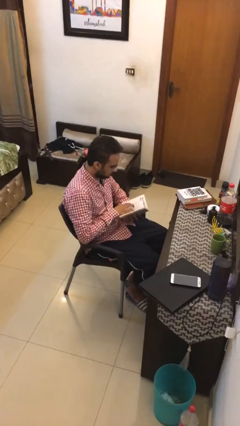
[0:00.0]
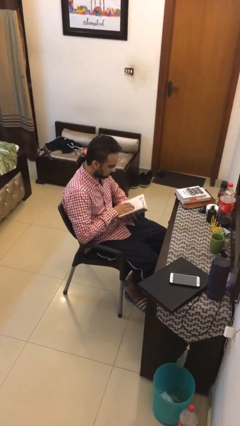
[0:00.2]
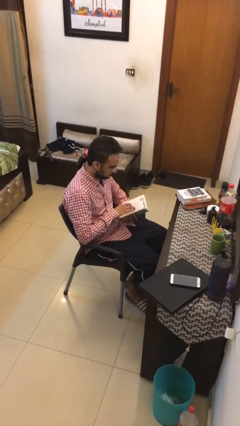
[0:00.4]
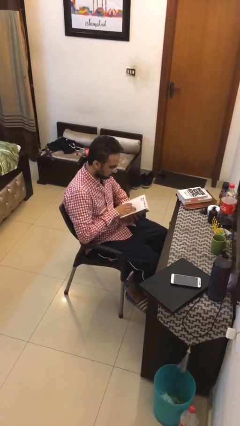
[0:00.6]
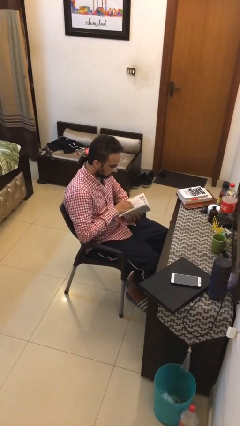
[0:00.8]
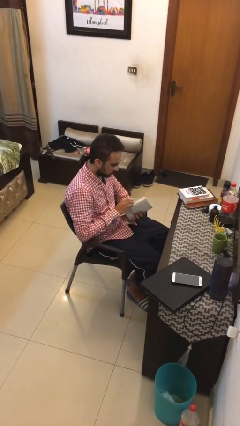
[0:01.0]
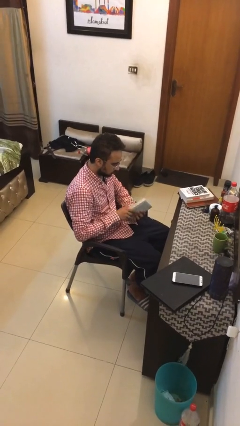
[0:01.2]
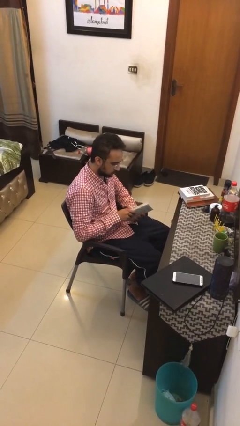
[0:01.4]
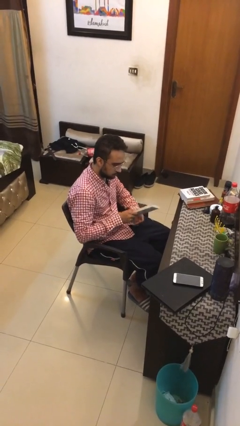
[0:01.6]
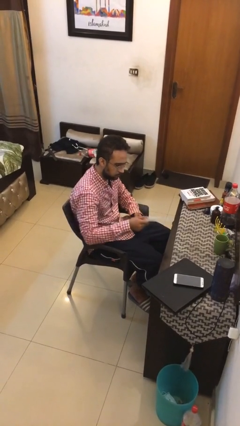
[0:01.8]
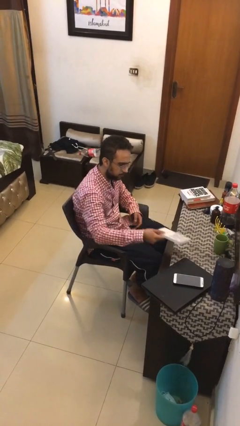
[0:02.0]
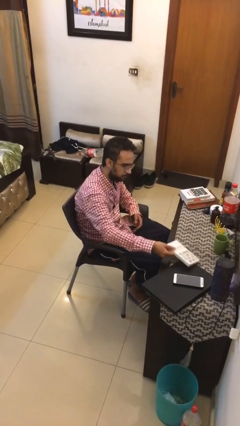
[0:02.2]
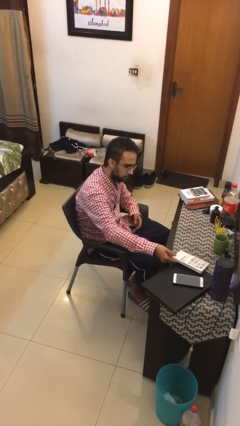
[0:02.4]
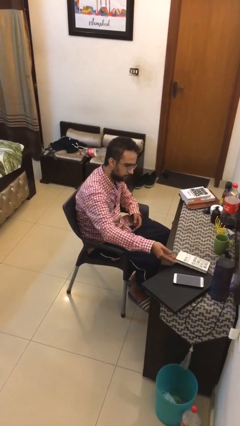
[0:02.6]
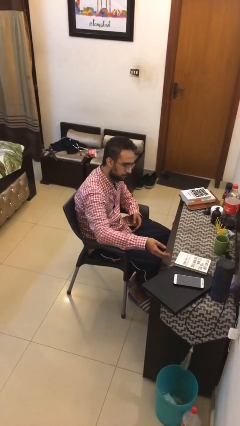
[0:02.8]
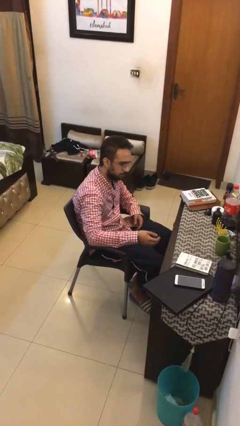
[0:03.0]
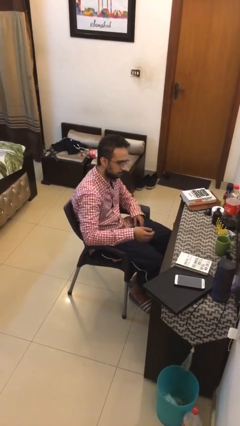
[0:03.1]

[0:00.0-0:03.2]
person puts down object on table

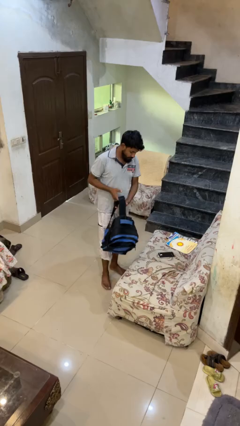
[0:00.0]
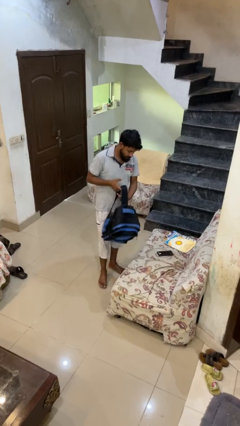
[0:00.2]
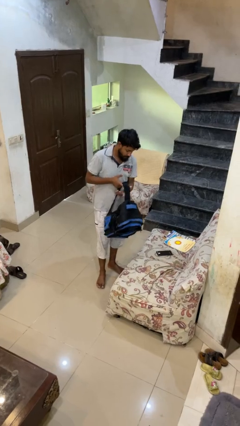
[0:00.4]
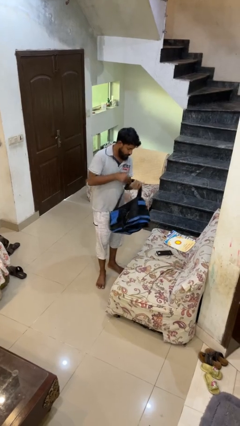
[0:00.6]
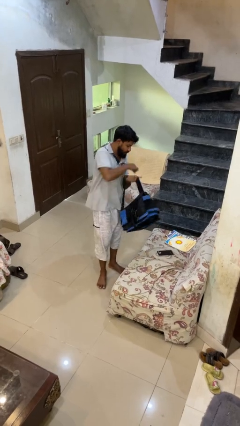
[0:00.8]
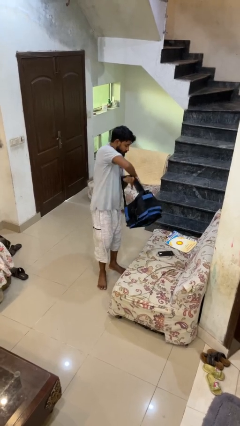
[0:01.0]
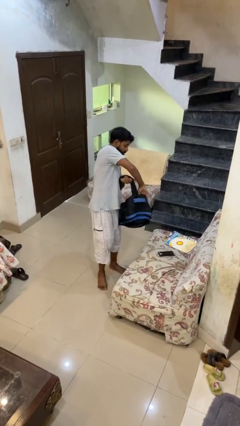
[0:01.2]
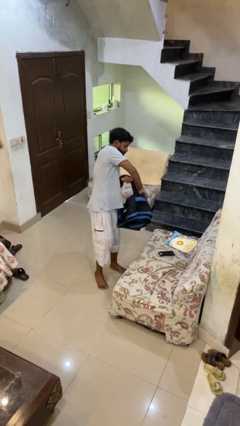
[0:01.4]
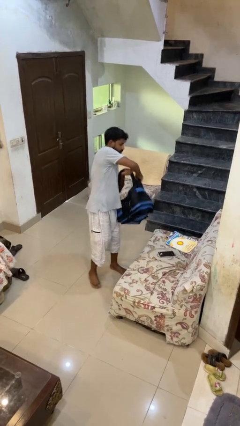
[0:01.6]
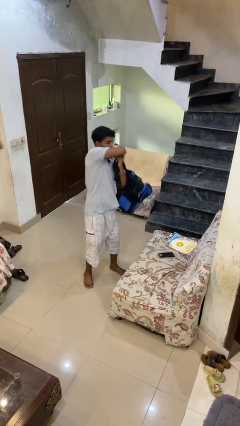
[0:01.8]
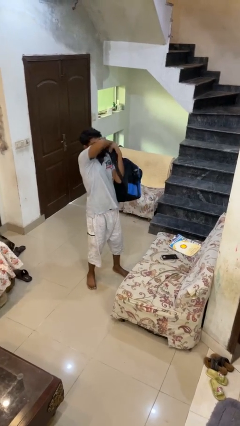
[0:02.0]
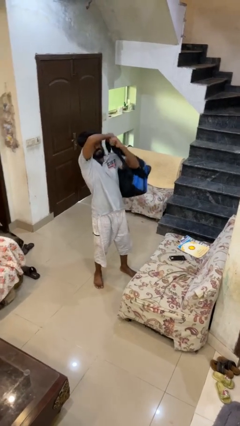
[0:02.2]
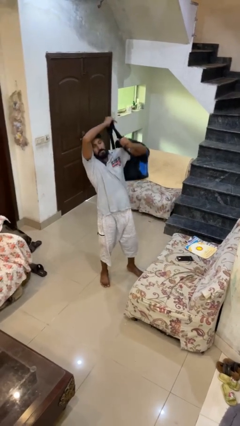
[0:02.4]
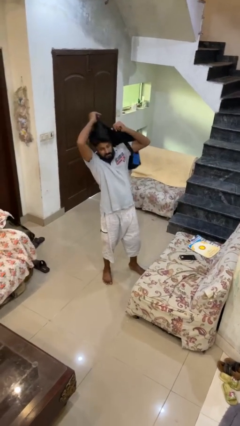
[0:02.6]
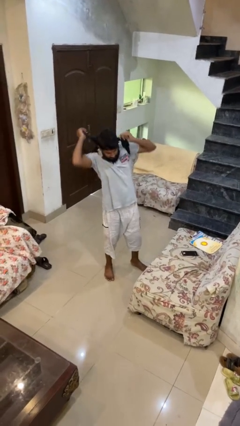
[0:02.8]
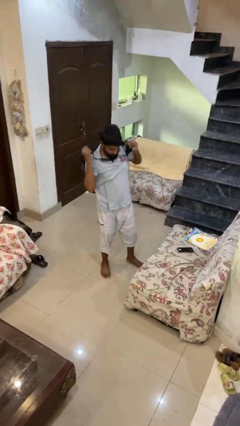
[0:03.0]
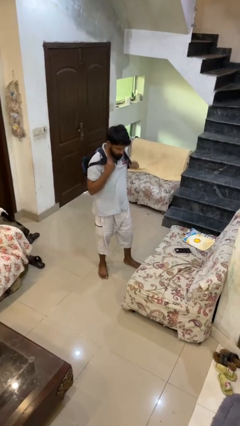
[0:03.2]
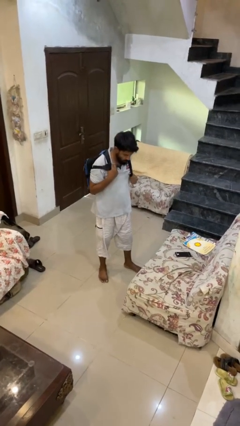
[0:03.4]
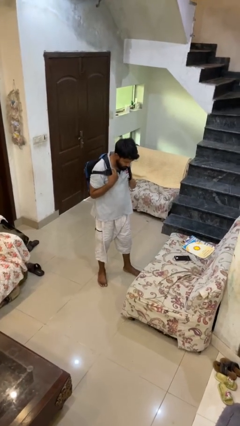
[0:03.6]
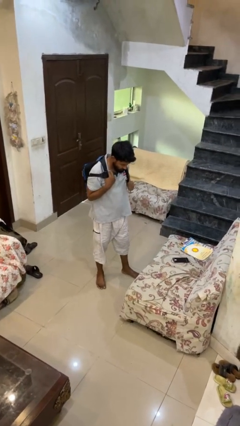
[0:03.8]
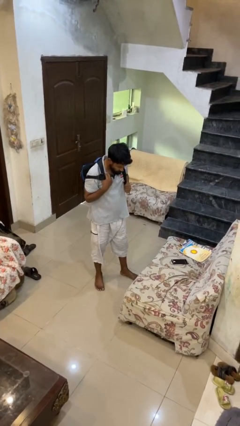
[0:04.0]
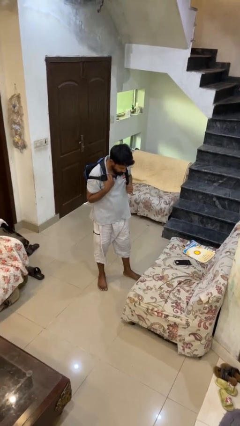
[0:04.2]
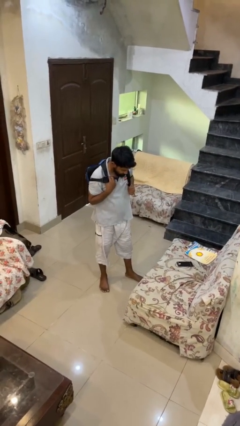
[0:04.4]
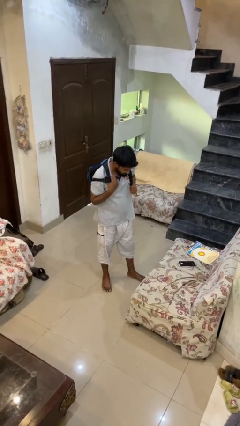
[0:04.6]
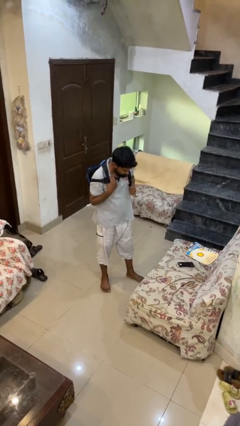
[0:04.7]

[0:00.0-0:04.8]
person puts on backpack

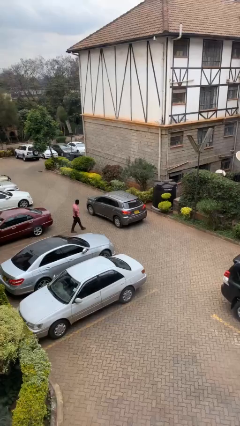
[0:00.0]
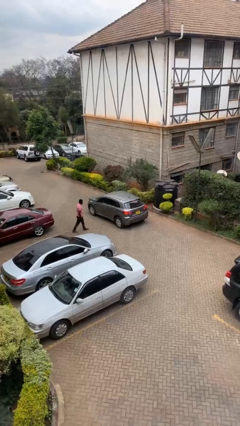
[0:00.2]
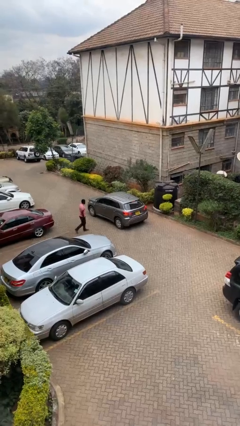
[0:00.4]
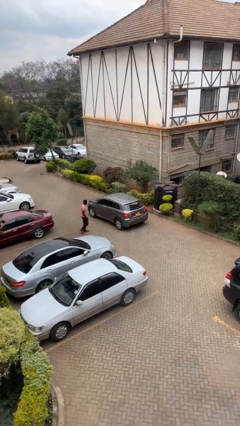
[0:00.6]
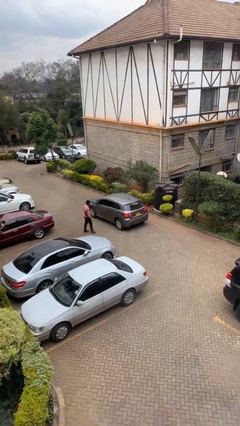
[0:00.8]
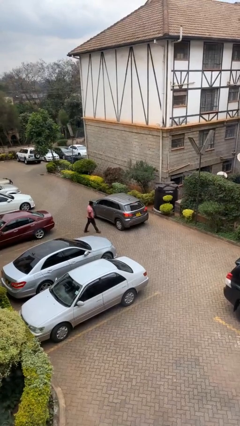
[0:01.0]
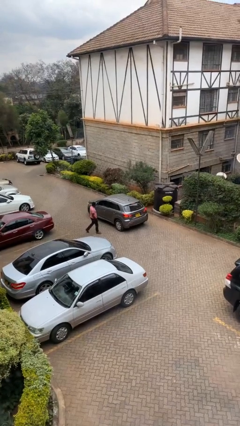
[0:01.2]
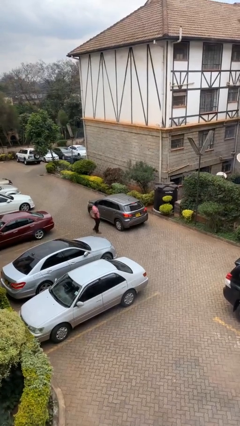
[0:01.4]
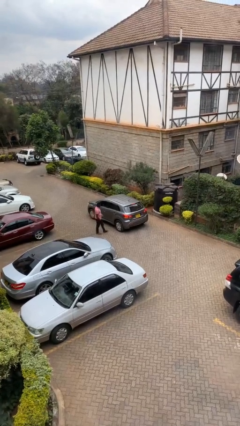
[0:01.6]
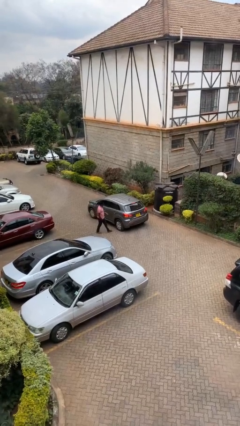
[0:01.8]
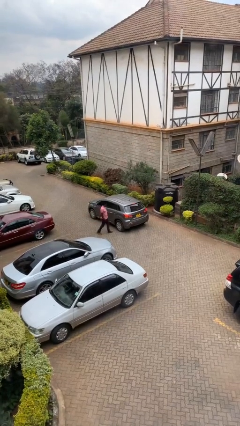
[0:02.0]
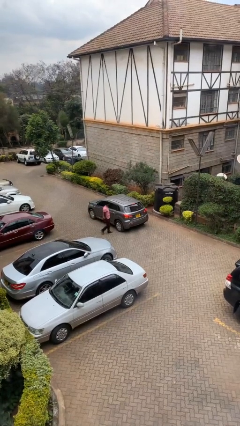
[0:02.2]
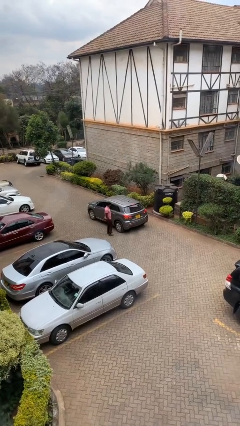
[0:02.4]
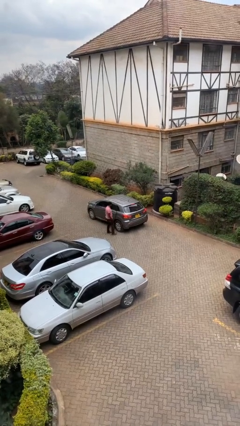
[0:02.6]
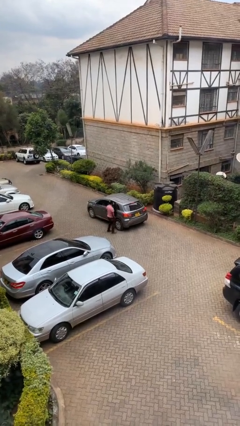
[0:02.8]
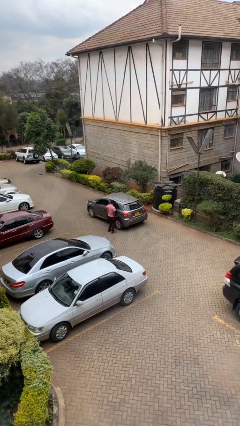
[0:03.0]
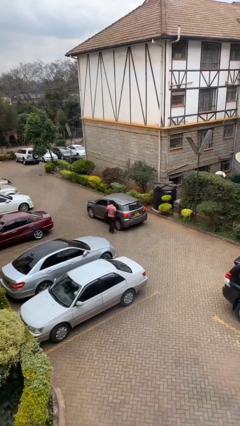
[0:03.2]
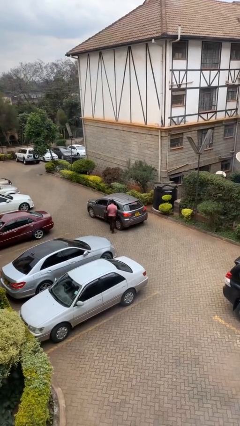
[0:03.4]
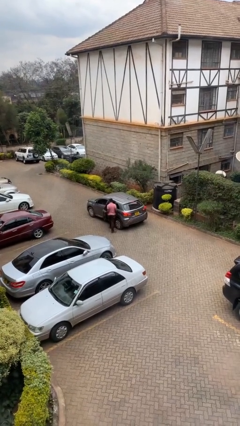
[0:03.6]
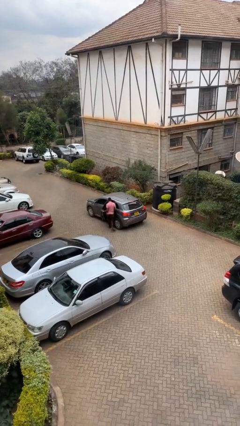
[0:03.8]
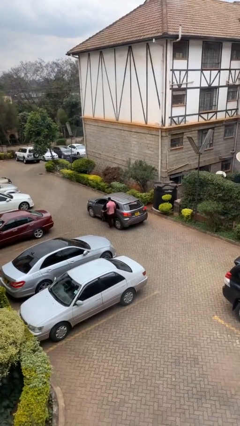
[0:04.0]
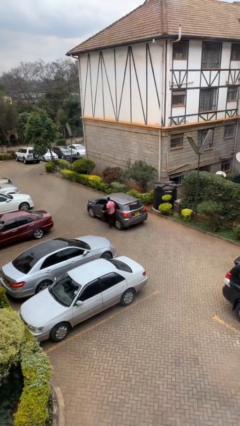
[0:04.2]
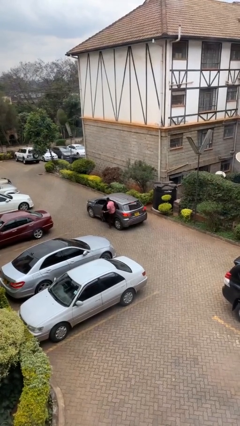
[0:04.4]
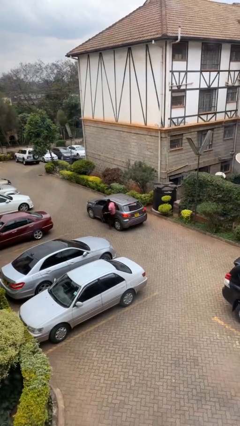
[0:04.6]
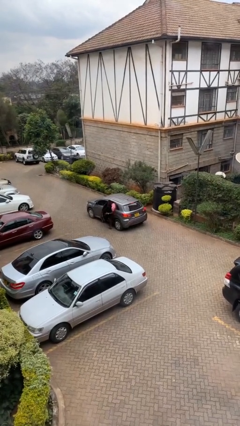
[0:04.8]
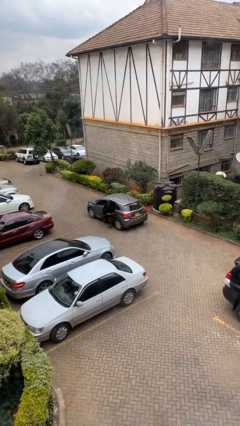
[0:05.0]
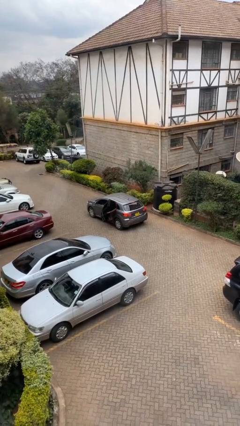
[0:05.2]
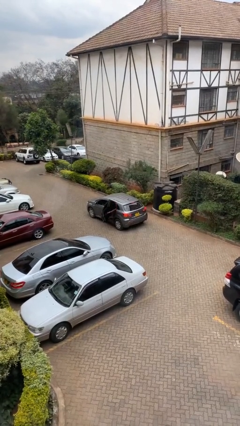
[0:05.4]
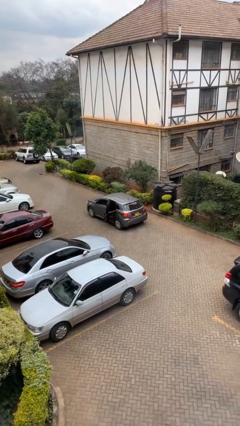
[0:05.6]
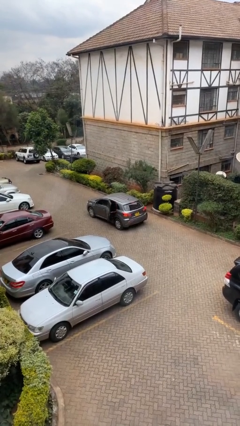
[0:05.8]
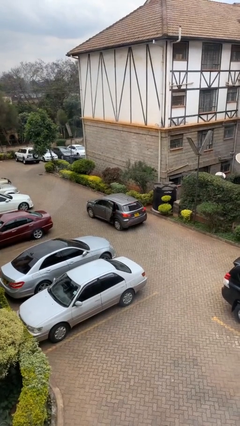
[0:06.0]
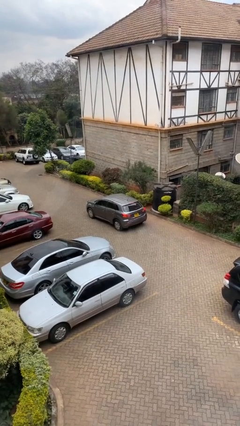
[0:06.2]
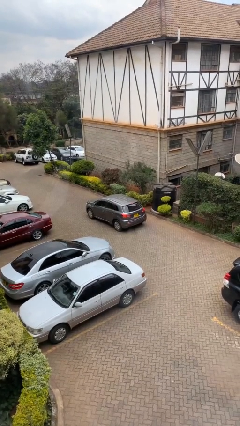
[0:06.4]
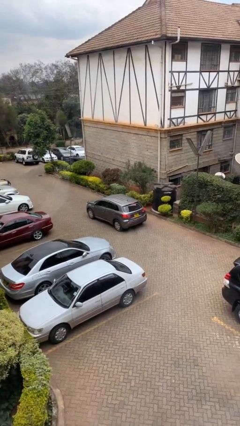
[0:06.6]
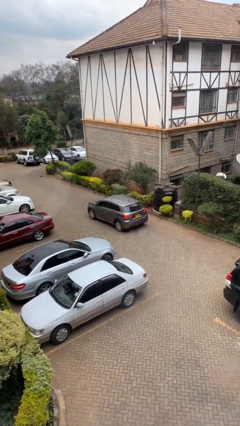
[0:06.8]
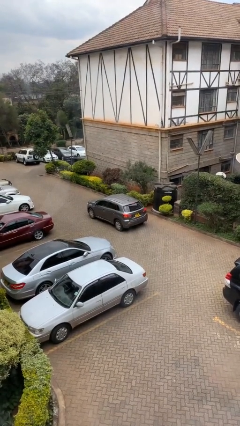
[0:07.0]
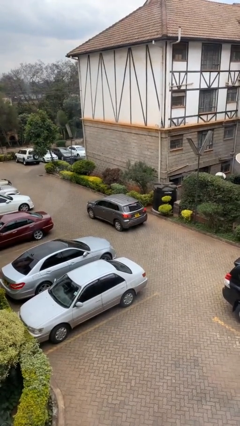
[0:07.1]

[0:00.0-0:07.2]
car picks up person

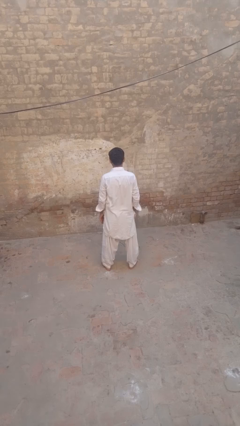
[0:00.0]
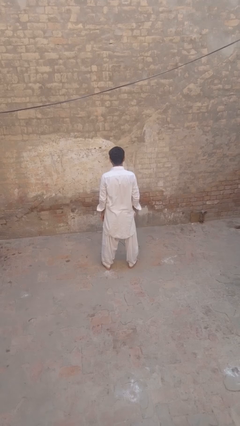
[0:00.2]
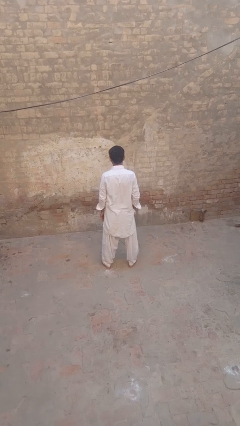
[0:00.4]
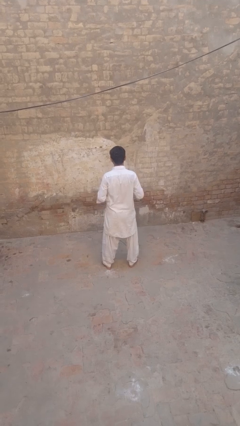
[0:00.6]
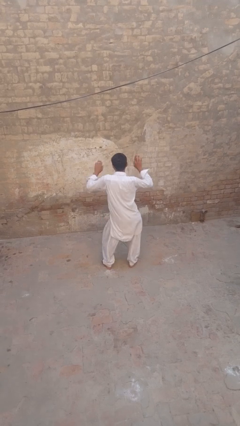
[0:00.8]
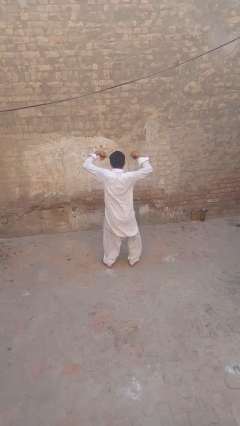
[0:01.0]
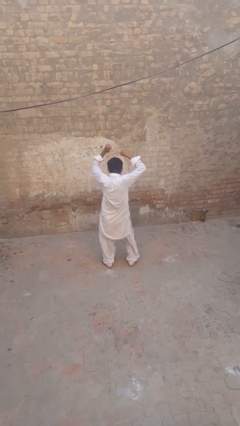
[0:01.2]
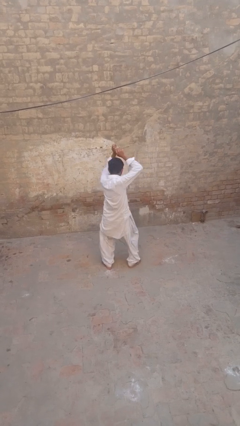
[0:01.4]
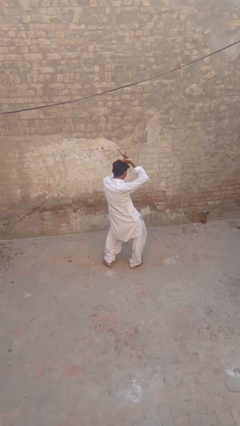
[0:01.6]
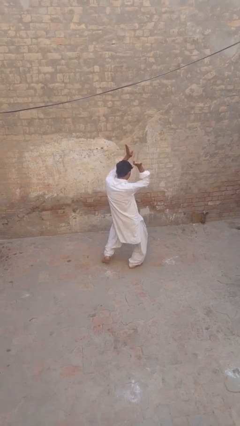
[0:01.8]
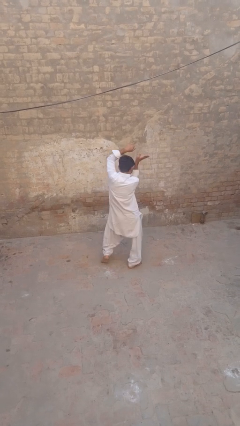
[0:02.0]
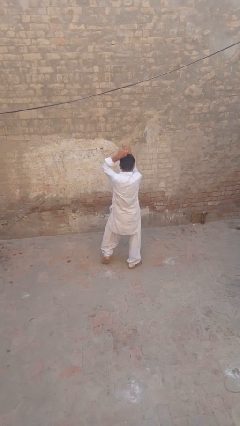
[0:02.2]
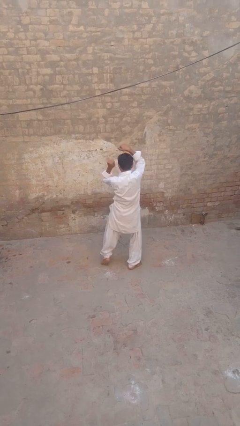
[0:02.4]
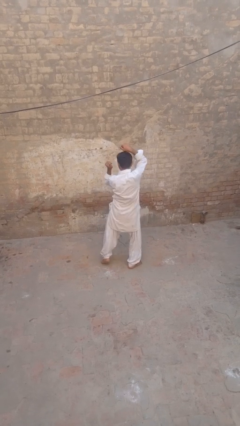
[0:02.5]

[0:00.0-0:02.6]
person dances in place
